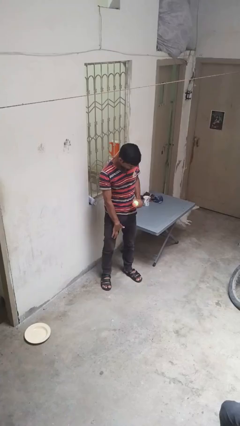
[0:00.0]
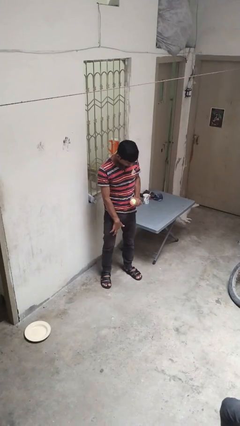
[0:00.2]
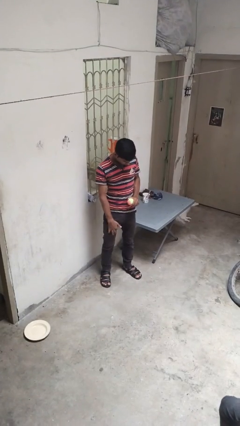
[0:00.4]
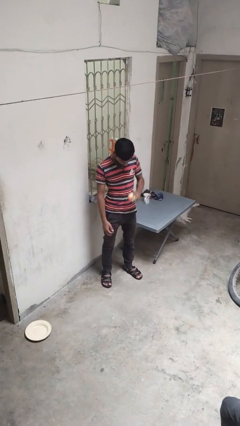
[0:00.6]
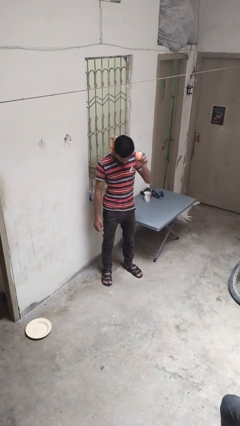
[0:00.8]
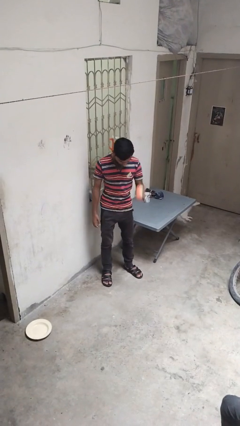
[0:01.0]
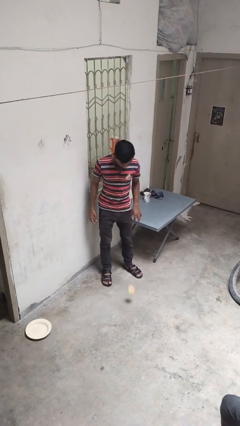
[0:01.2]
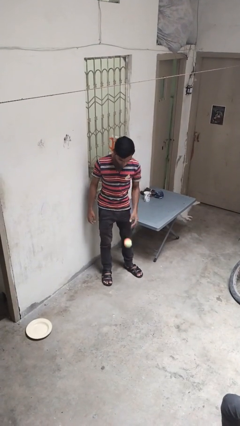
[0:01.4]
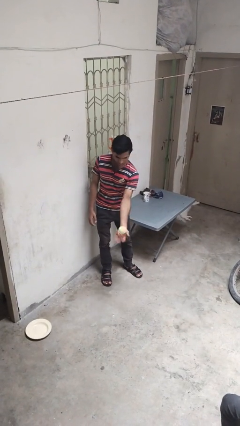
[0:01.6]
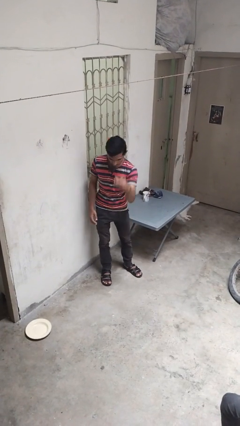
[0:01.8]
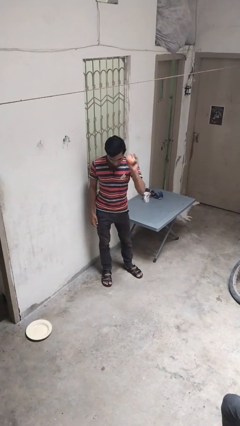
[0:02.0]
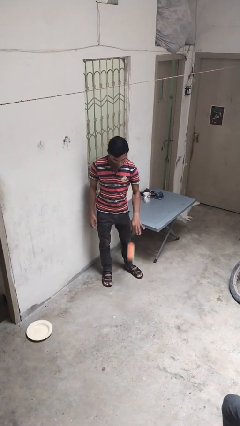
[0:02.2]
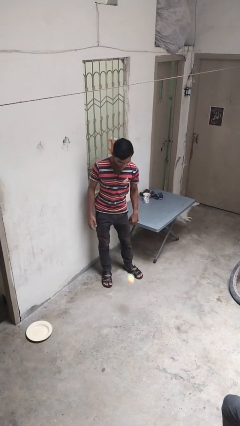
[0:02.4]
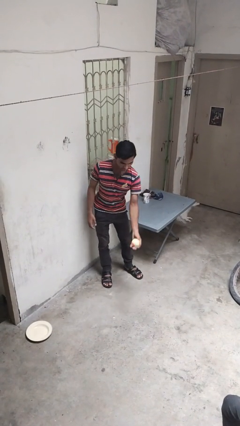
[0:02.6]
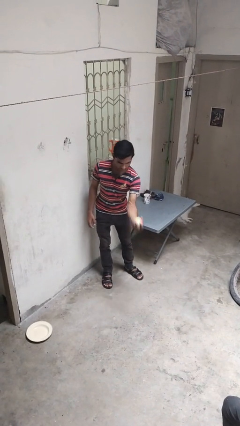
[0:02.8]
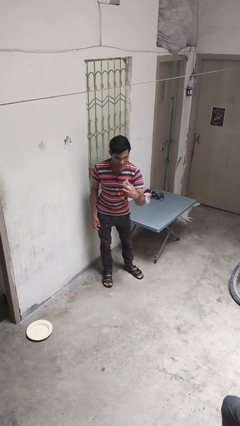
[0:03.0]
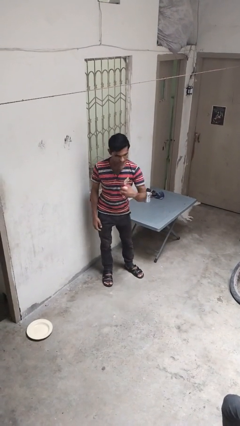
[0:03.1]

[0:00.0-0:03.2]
person bounces ball on floor

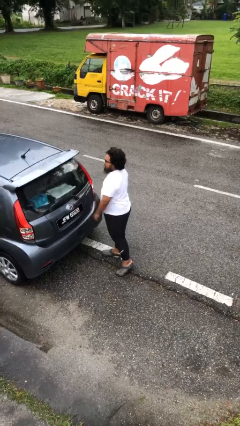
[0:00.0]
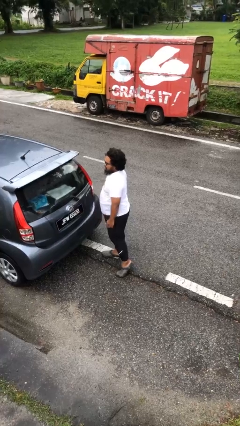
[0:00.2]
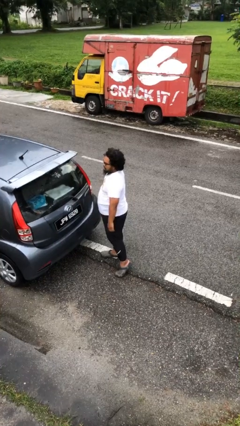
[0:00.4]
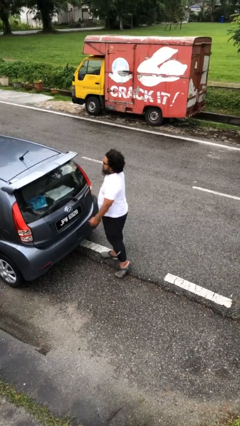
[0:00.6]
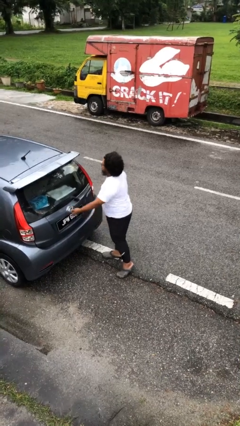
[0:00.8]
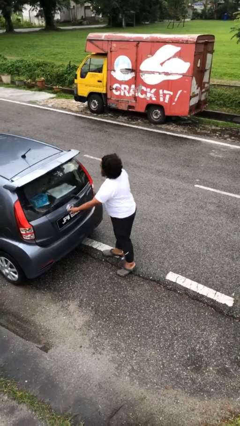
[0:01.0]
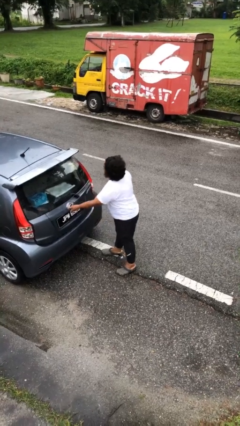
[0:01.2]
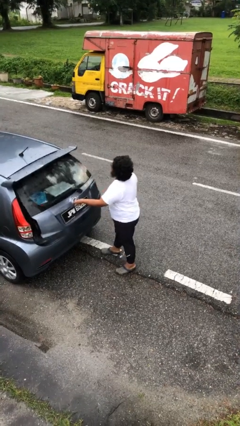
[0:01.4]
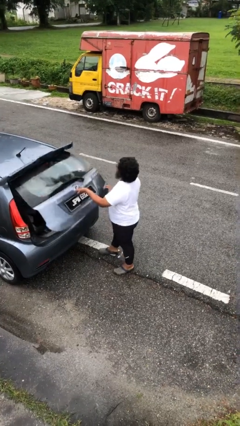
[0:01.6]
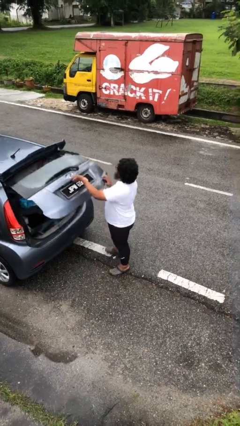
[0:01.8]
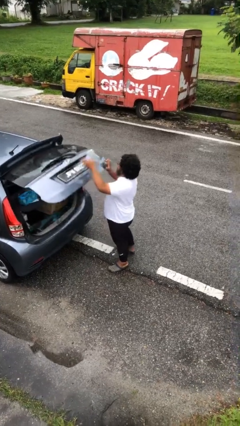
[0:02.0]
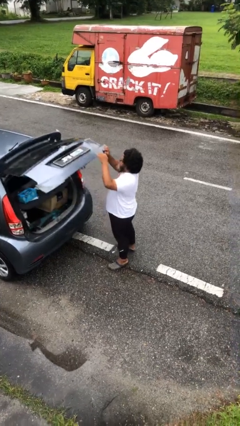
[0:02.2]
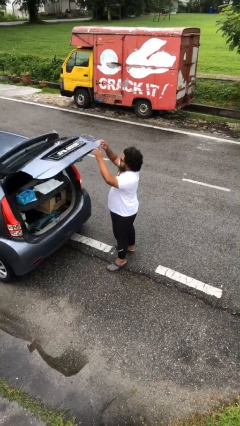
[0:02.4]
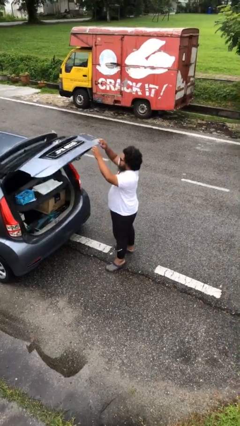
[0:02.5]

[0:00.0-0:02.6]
person opens car trunk

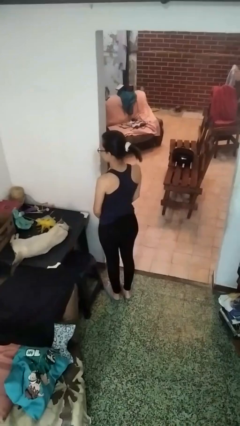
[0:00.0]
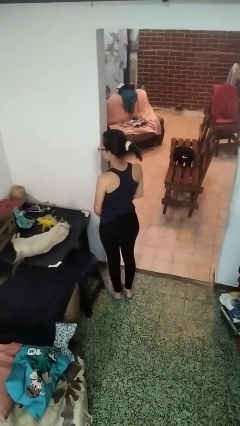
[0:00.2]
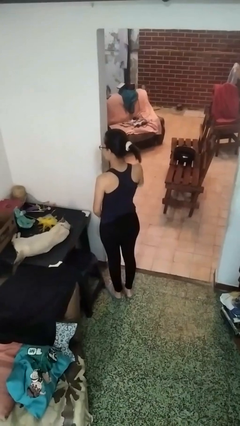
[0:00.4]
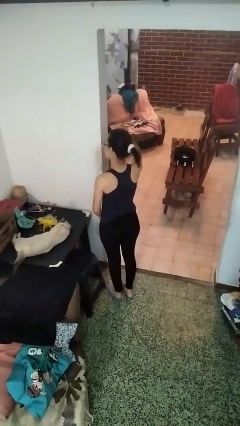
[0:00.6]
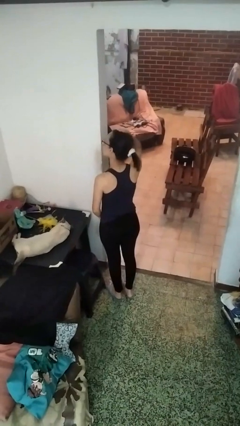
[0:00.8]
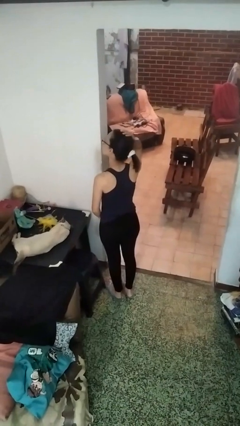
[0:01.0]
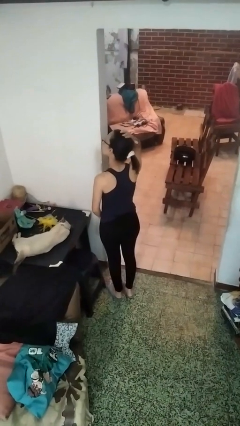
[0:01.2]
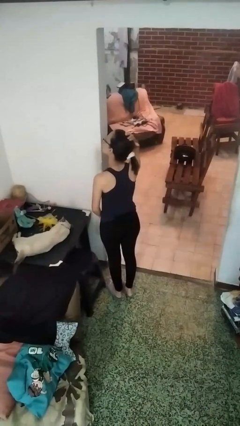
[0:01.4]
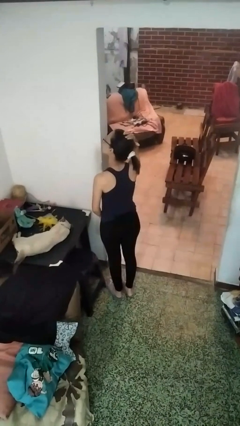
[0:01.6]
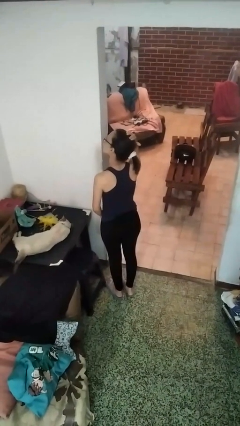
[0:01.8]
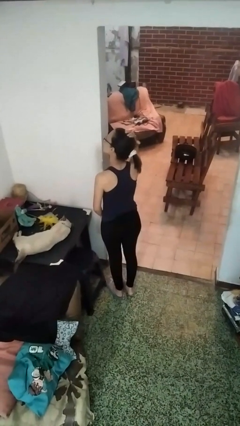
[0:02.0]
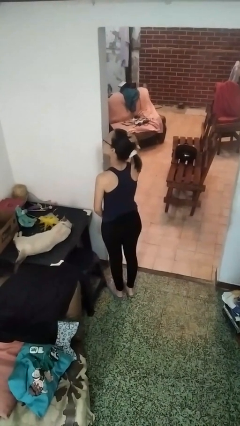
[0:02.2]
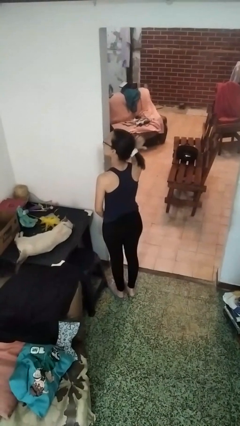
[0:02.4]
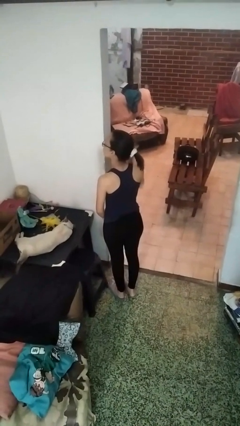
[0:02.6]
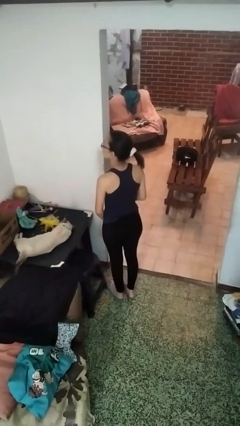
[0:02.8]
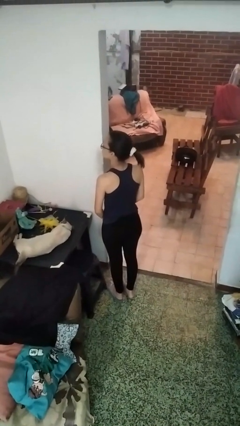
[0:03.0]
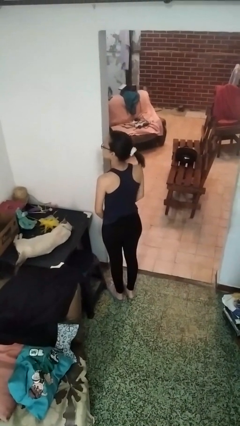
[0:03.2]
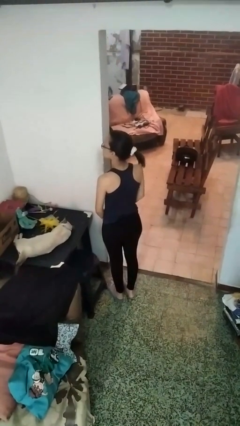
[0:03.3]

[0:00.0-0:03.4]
person pats head

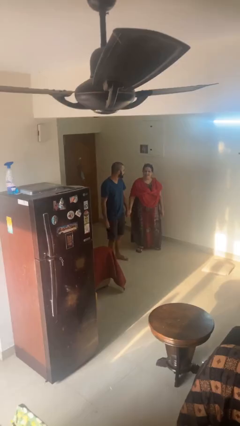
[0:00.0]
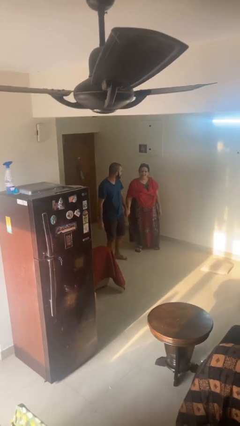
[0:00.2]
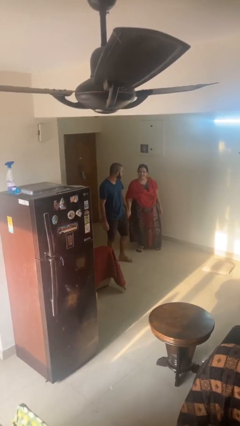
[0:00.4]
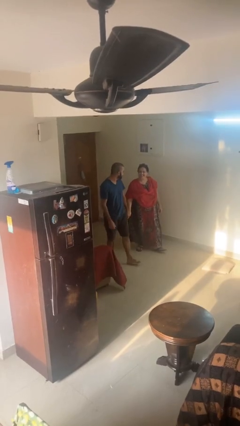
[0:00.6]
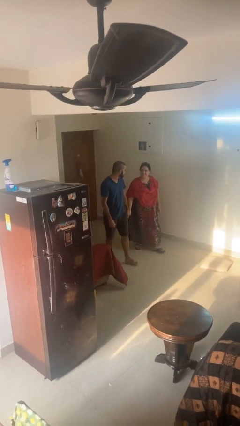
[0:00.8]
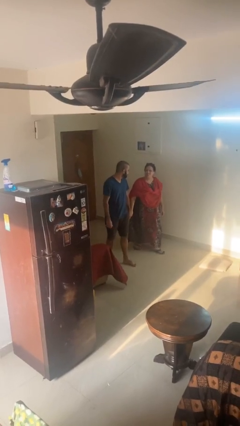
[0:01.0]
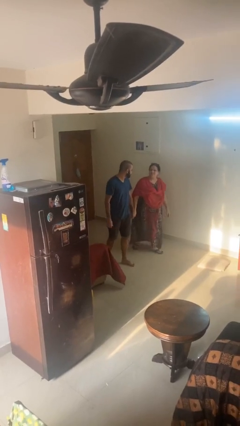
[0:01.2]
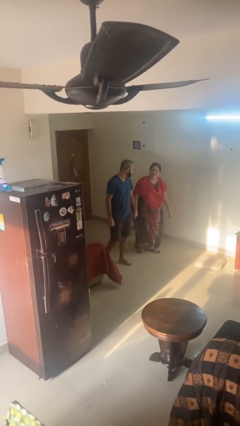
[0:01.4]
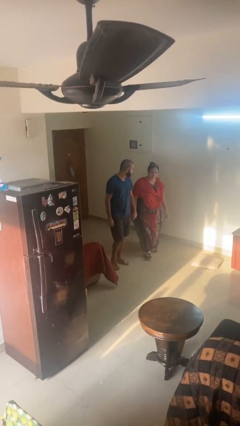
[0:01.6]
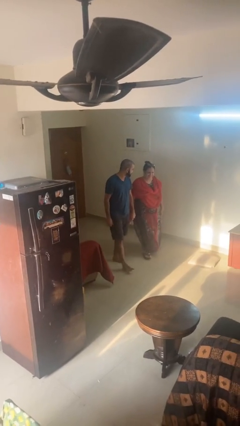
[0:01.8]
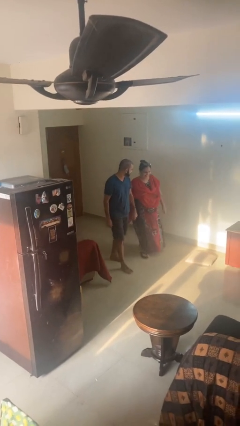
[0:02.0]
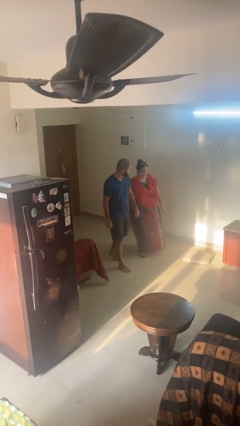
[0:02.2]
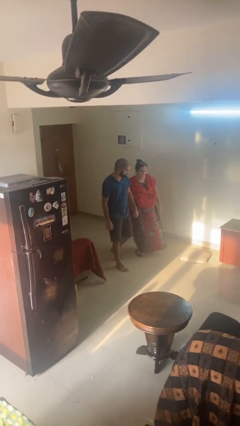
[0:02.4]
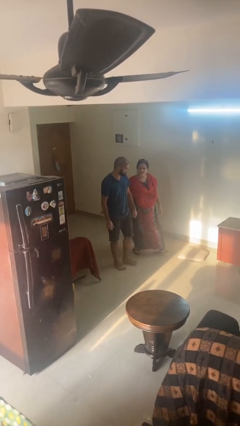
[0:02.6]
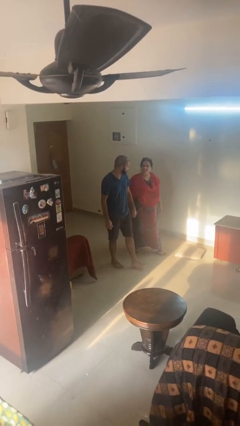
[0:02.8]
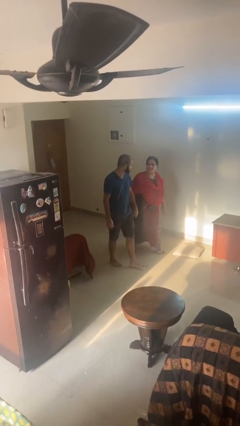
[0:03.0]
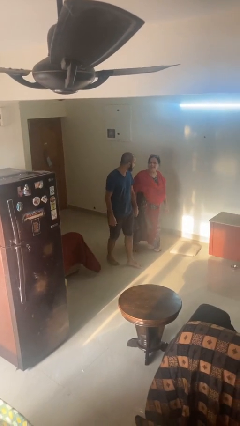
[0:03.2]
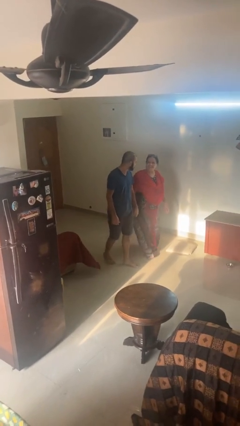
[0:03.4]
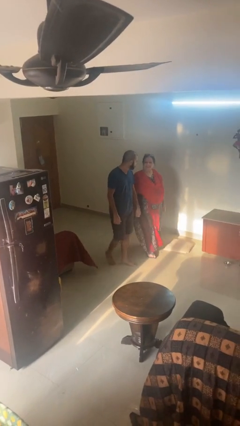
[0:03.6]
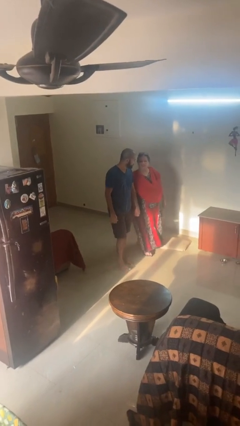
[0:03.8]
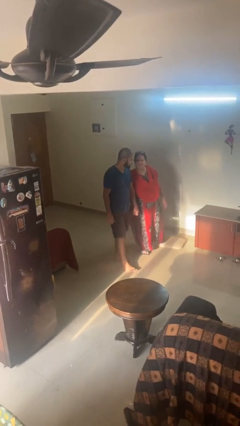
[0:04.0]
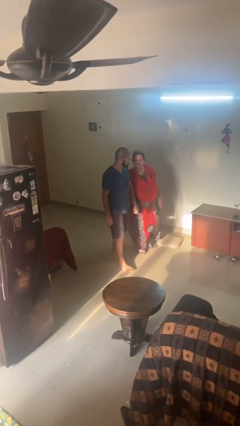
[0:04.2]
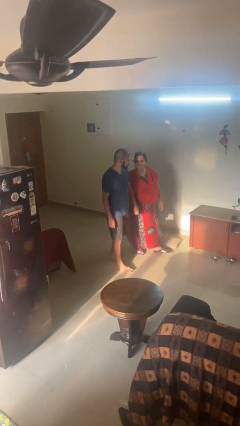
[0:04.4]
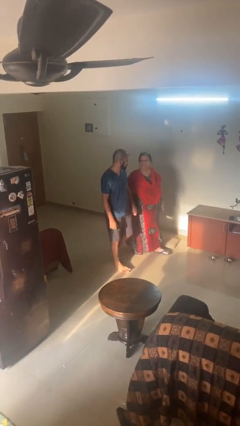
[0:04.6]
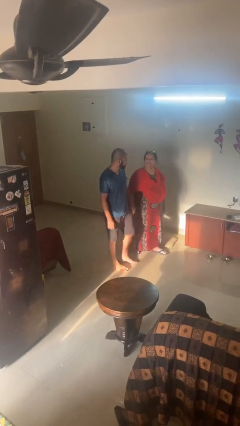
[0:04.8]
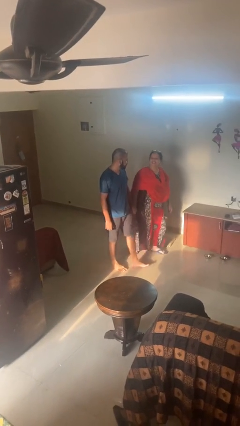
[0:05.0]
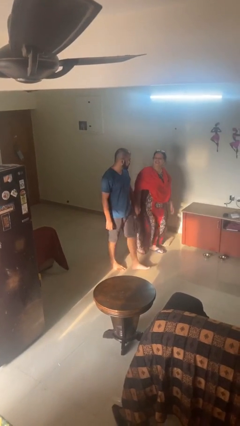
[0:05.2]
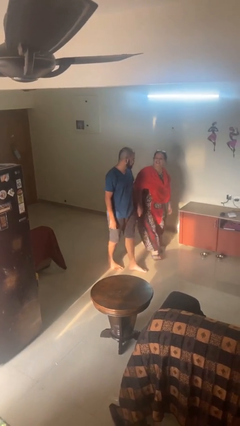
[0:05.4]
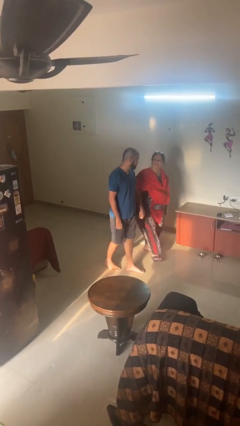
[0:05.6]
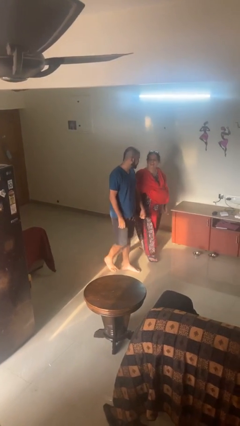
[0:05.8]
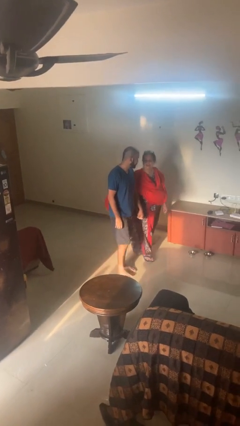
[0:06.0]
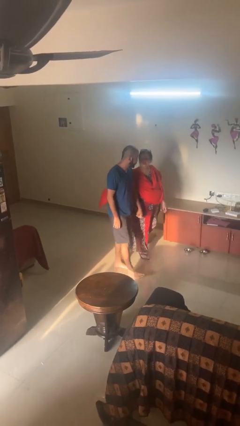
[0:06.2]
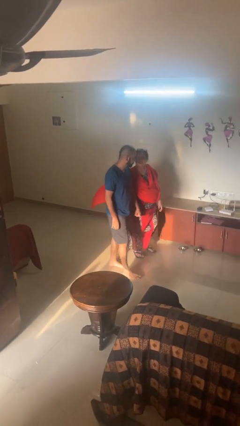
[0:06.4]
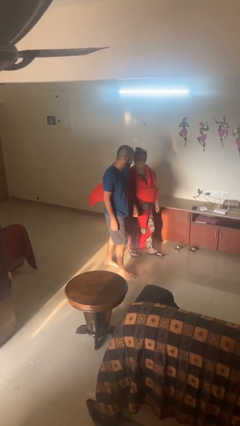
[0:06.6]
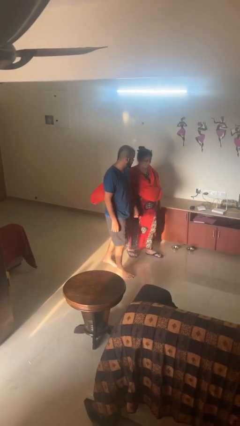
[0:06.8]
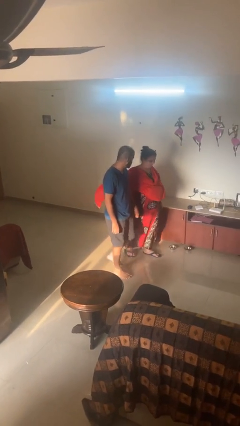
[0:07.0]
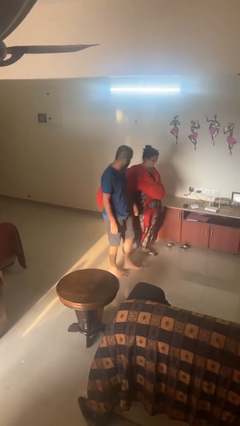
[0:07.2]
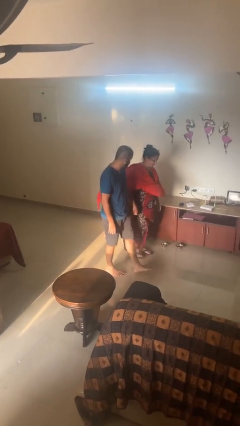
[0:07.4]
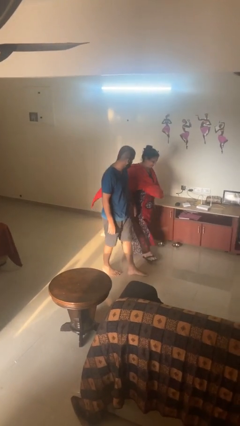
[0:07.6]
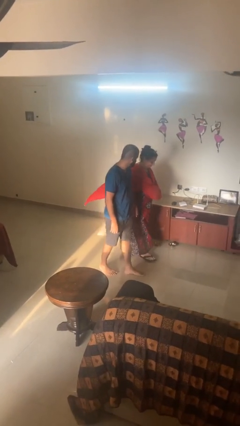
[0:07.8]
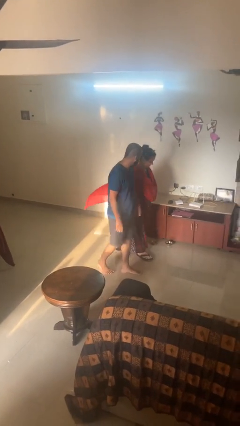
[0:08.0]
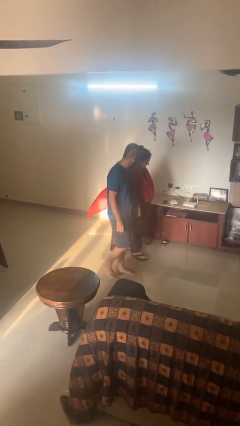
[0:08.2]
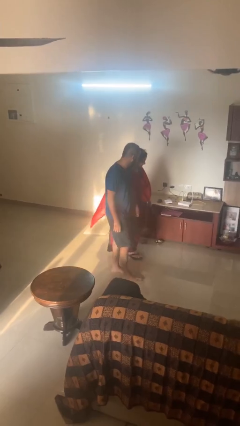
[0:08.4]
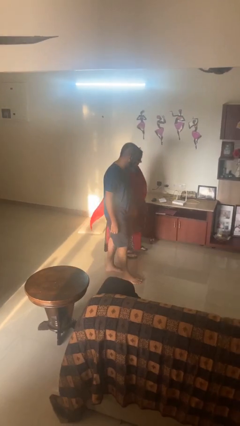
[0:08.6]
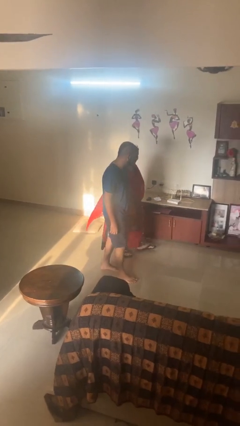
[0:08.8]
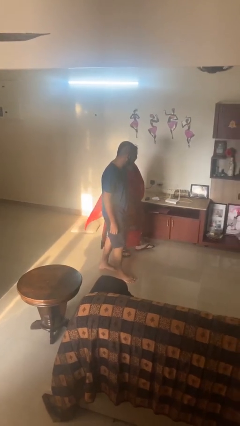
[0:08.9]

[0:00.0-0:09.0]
person holds hand
